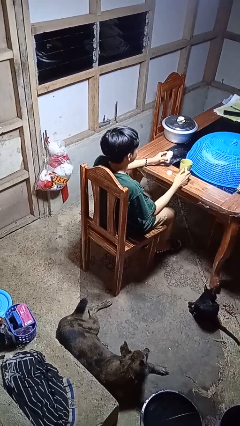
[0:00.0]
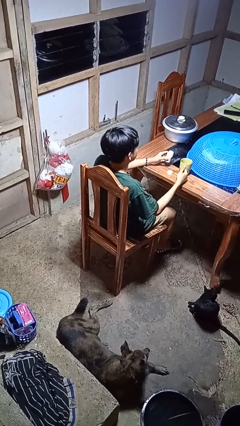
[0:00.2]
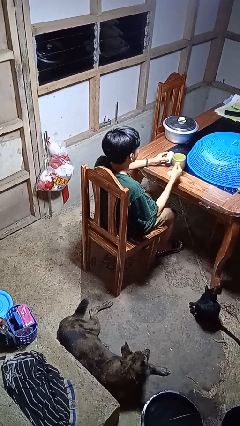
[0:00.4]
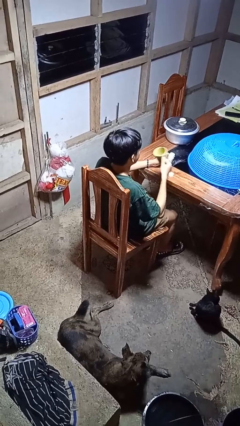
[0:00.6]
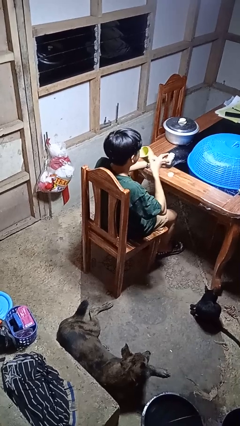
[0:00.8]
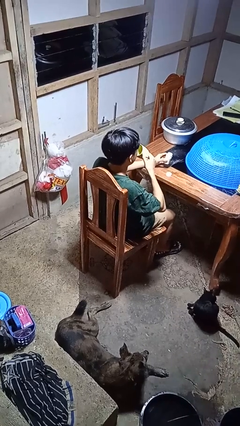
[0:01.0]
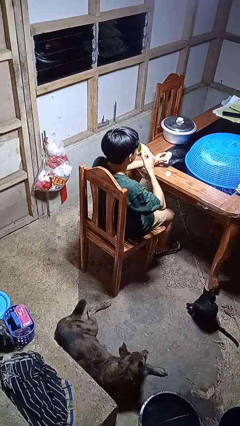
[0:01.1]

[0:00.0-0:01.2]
person drinks from cup

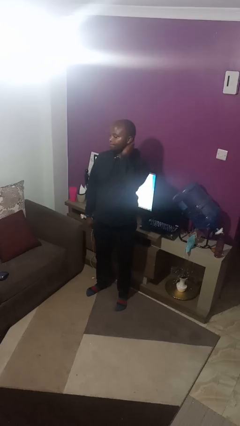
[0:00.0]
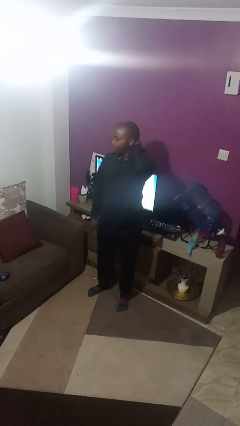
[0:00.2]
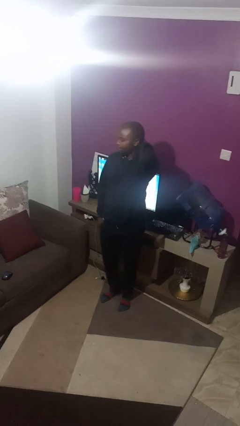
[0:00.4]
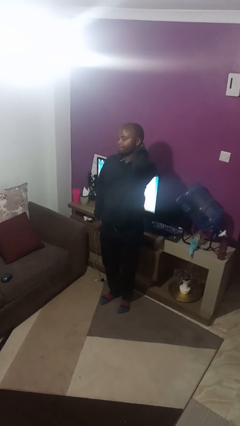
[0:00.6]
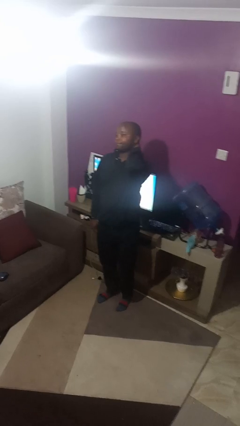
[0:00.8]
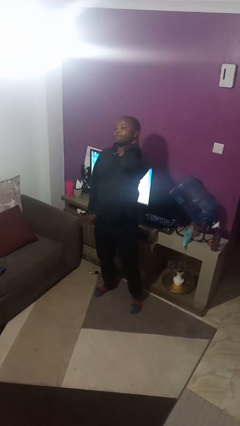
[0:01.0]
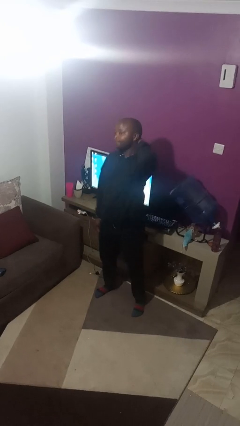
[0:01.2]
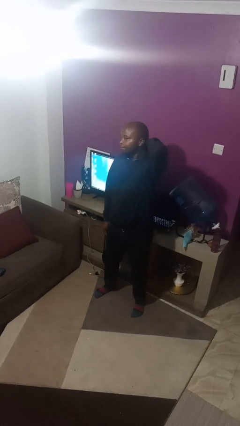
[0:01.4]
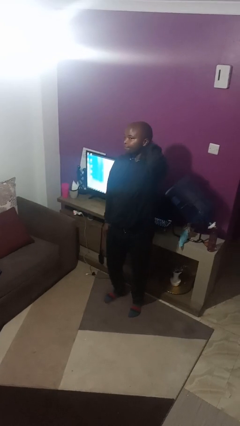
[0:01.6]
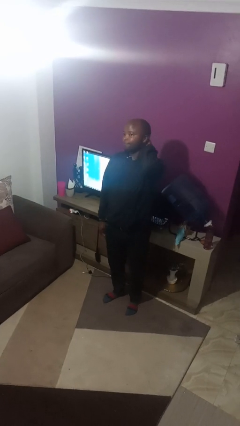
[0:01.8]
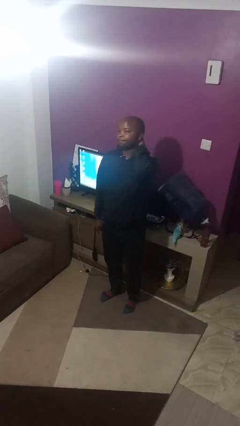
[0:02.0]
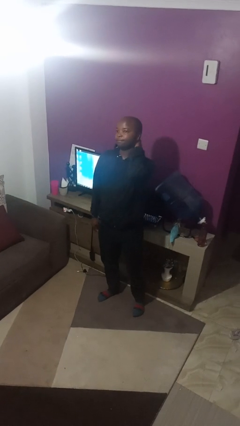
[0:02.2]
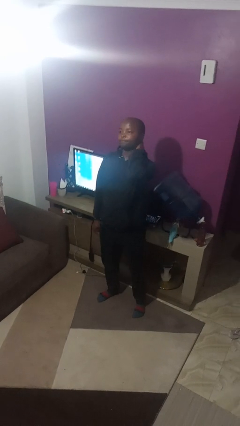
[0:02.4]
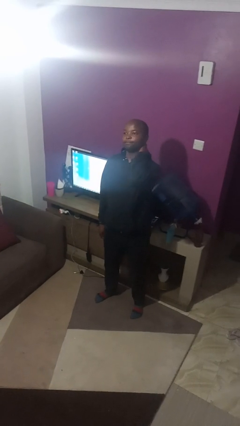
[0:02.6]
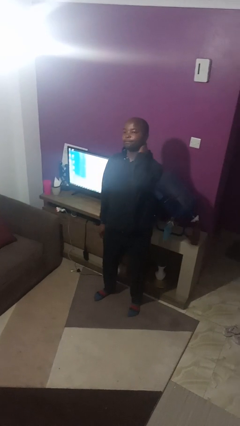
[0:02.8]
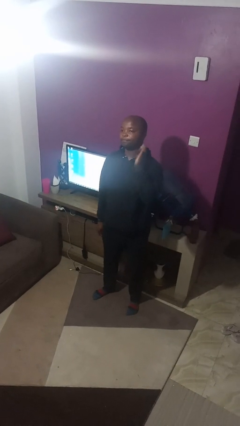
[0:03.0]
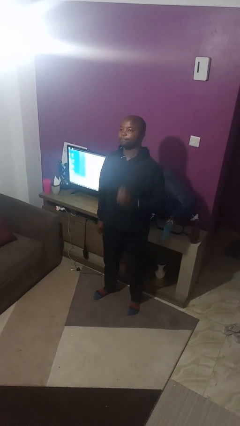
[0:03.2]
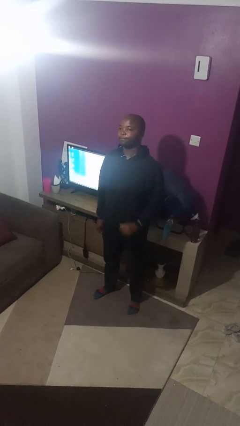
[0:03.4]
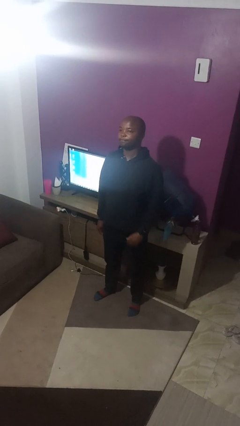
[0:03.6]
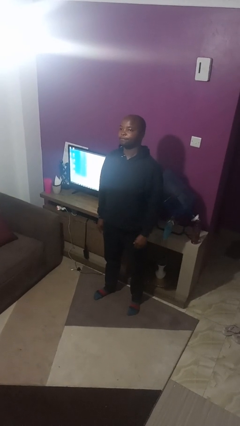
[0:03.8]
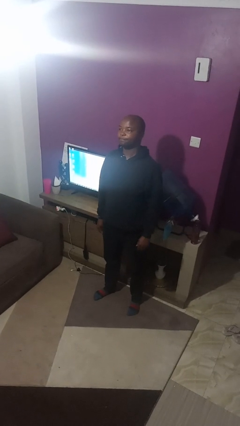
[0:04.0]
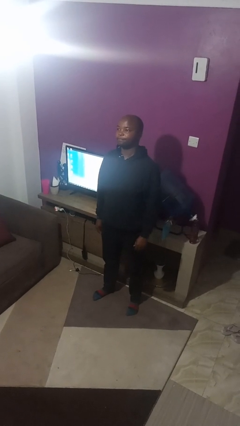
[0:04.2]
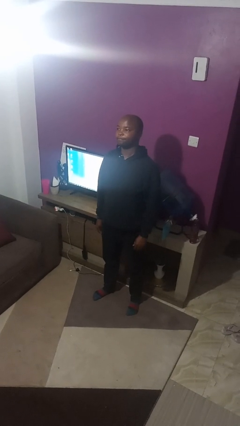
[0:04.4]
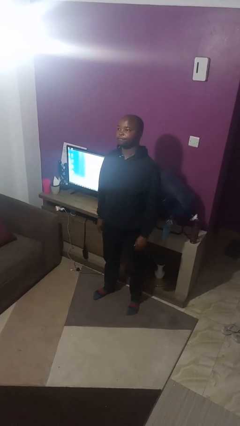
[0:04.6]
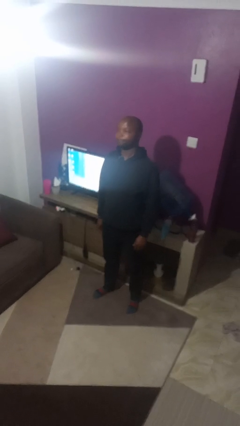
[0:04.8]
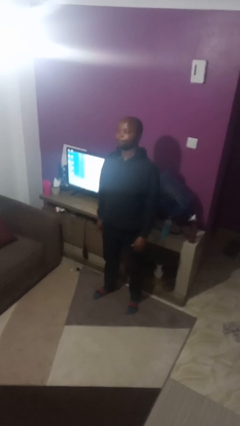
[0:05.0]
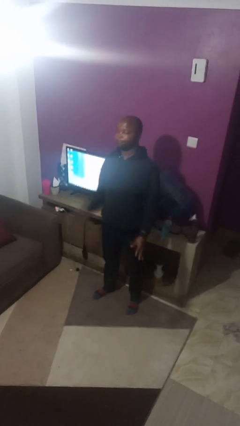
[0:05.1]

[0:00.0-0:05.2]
person rubs neck

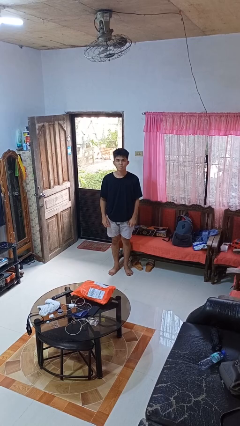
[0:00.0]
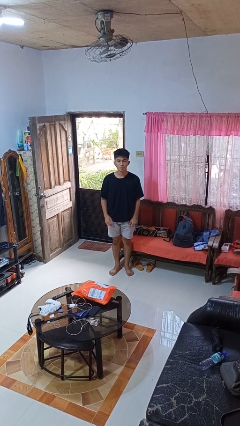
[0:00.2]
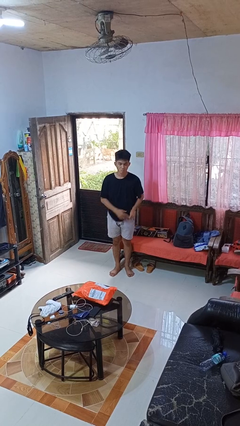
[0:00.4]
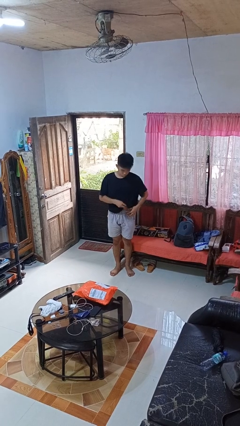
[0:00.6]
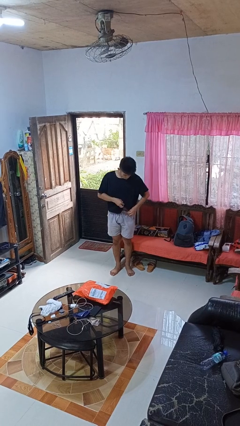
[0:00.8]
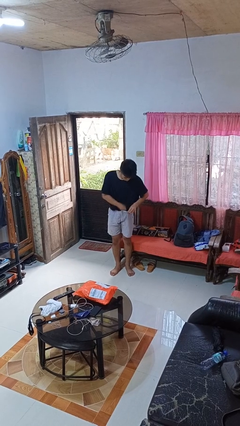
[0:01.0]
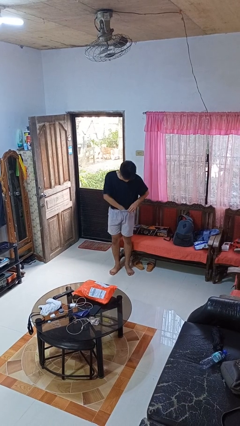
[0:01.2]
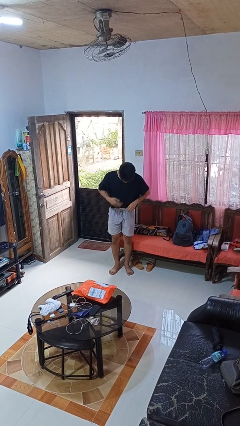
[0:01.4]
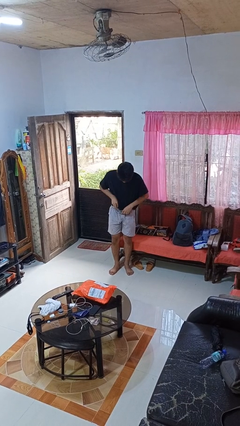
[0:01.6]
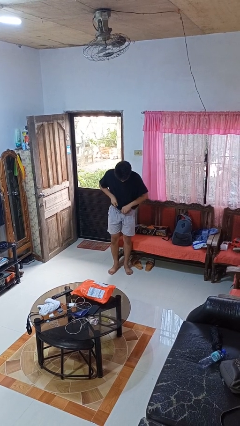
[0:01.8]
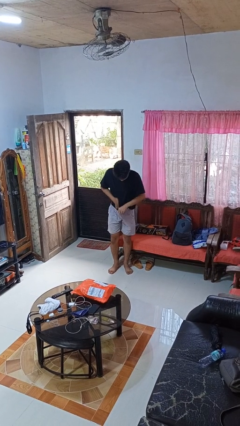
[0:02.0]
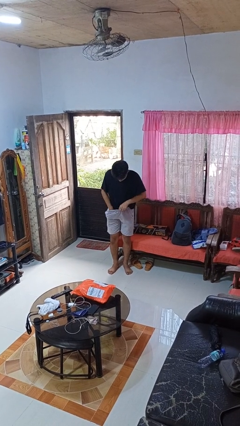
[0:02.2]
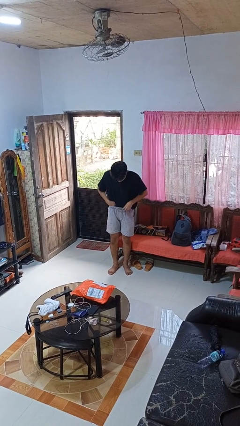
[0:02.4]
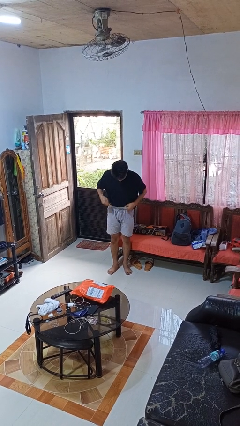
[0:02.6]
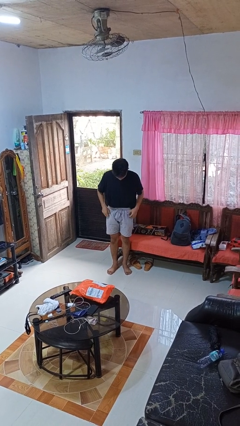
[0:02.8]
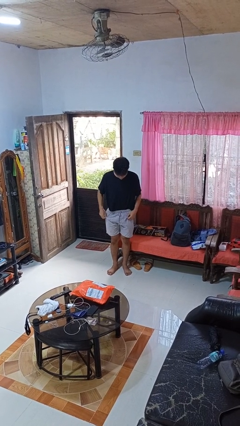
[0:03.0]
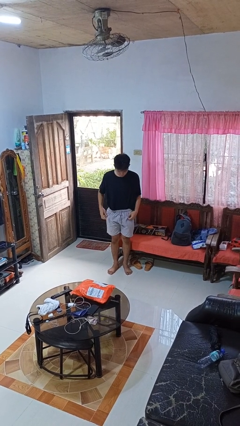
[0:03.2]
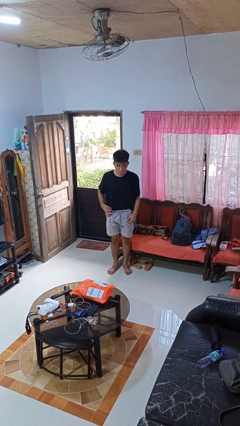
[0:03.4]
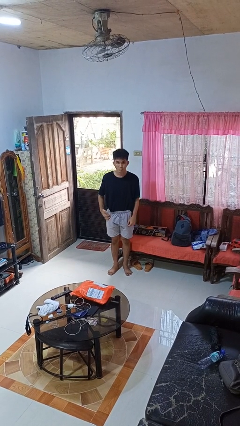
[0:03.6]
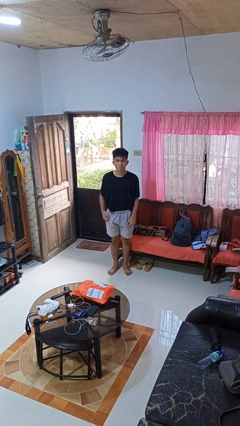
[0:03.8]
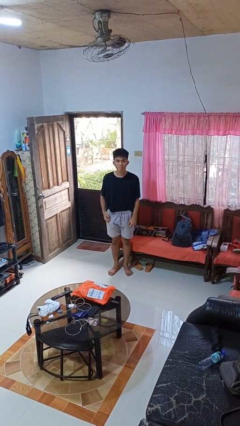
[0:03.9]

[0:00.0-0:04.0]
person tucks in shirt

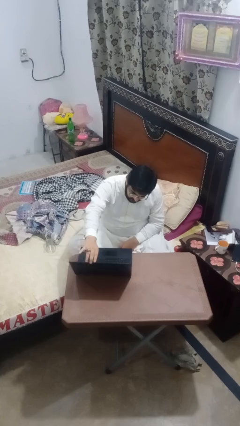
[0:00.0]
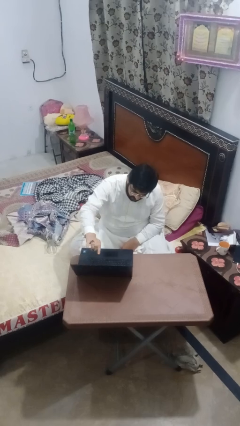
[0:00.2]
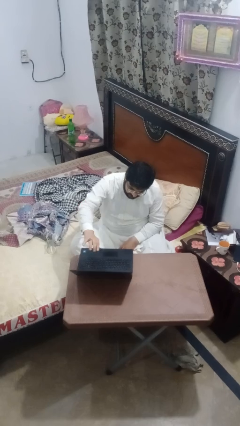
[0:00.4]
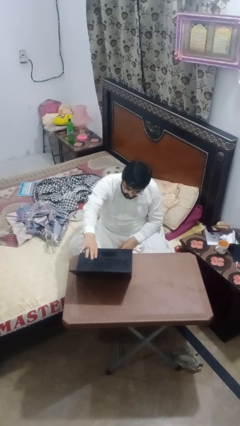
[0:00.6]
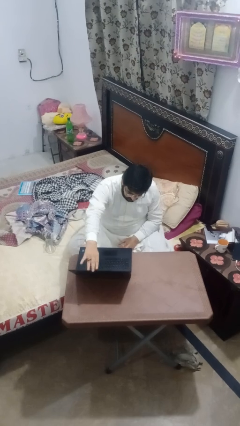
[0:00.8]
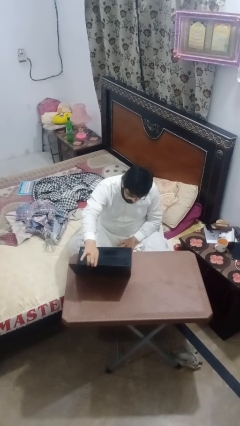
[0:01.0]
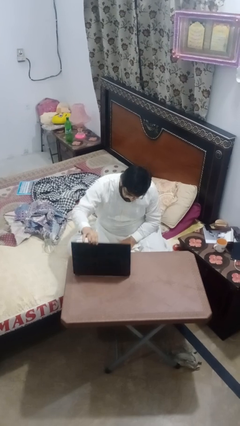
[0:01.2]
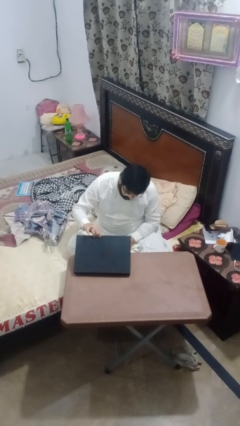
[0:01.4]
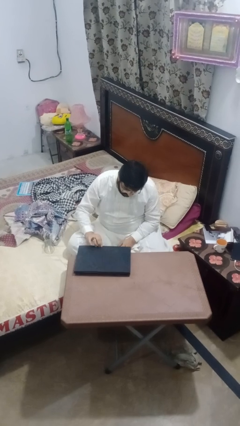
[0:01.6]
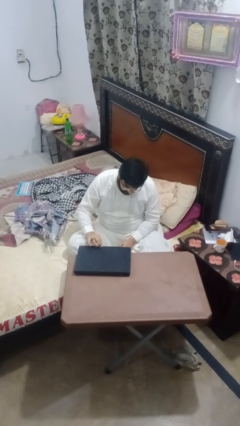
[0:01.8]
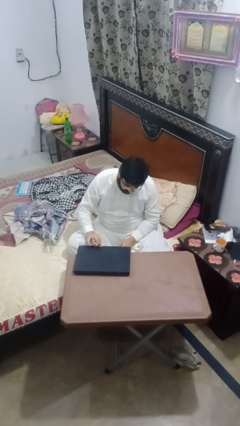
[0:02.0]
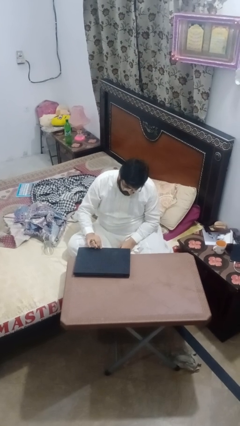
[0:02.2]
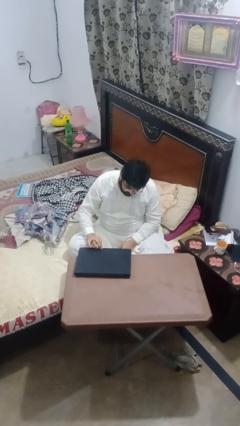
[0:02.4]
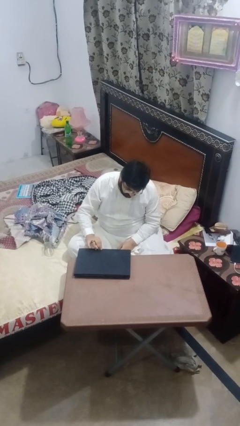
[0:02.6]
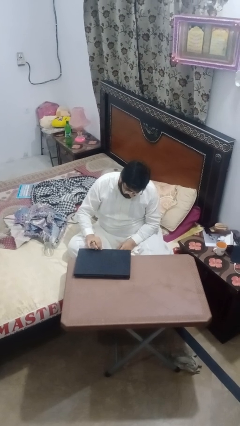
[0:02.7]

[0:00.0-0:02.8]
person closes laptop

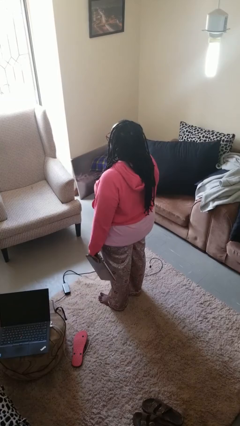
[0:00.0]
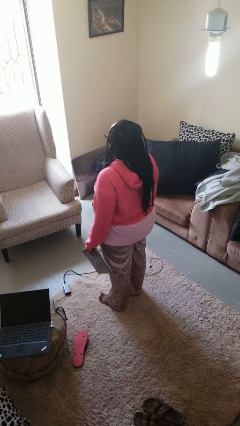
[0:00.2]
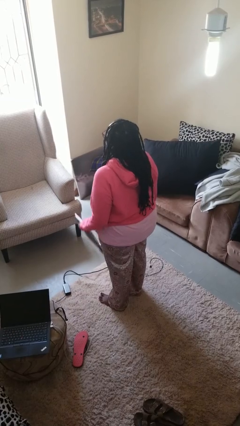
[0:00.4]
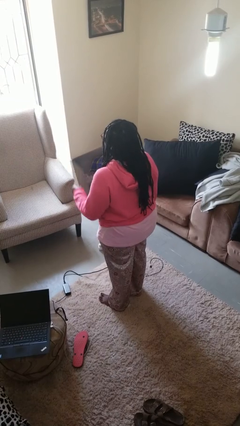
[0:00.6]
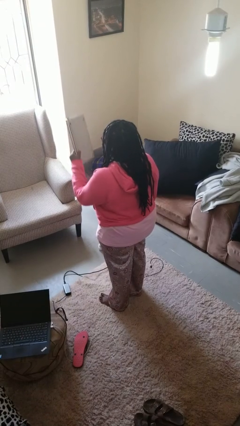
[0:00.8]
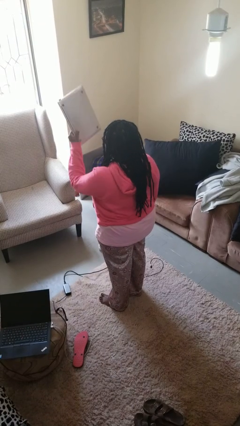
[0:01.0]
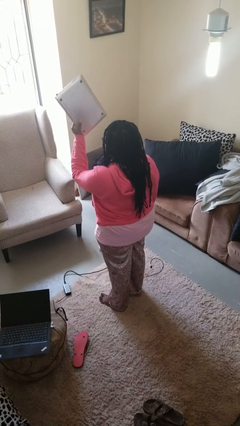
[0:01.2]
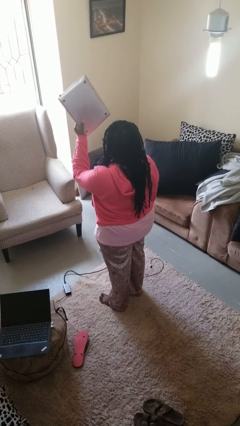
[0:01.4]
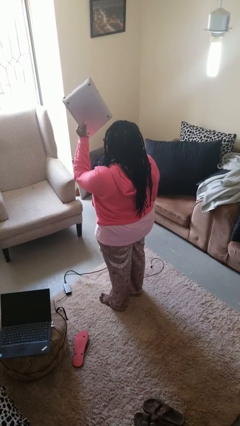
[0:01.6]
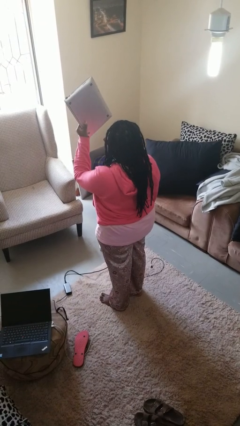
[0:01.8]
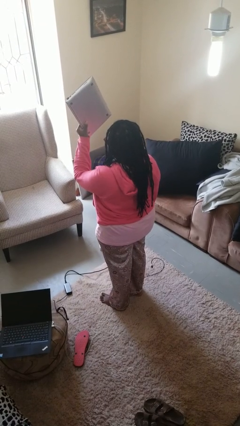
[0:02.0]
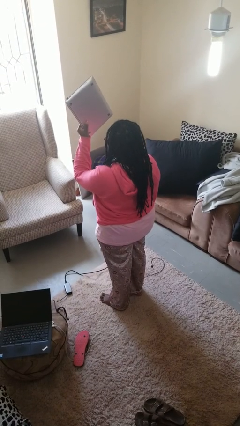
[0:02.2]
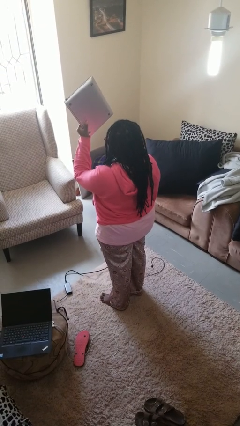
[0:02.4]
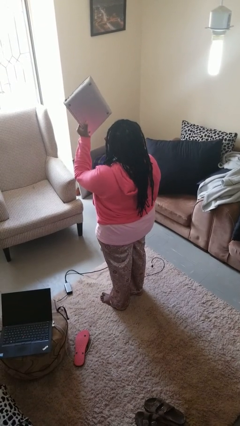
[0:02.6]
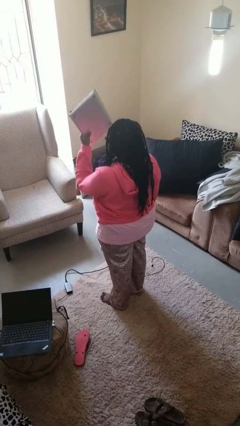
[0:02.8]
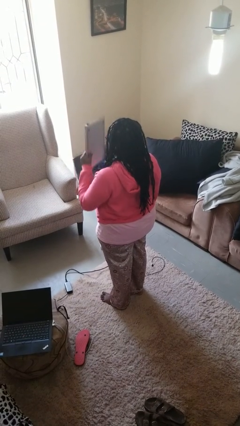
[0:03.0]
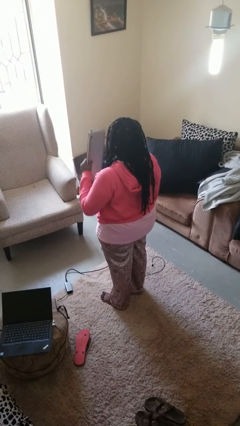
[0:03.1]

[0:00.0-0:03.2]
person holds object above head

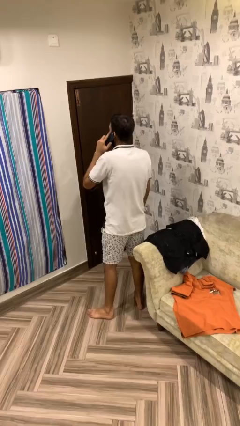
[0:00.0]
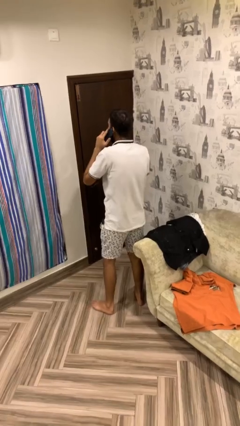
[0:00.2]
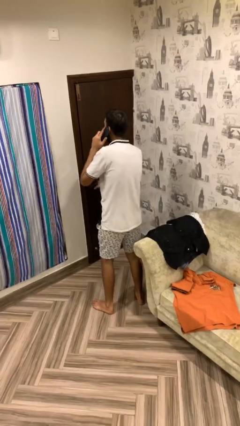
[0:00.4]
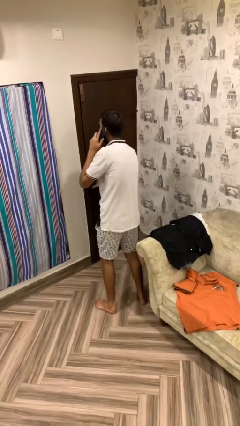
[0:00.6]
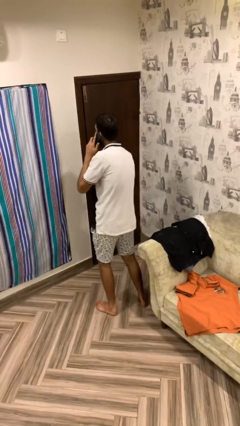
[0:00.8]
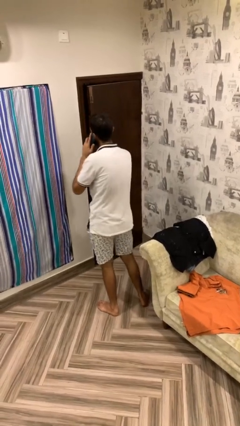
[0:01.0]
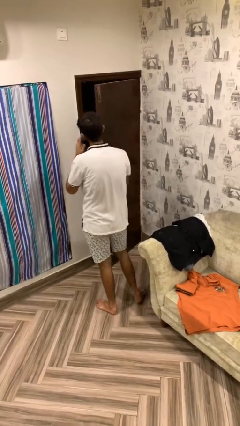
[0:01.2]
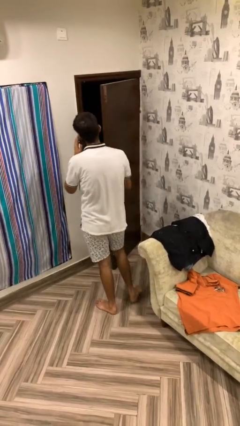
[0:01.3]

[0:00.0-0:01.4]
person opens facility door
